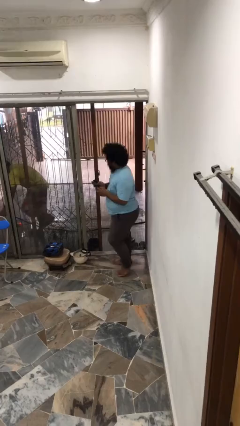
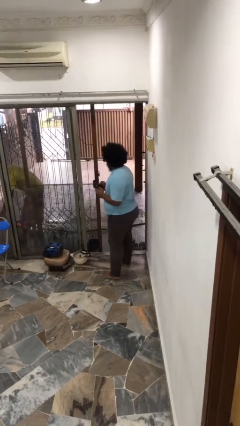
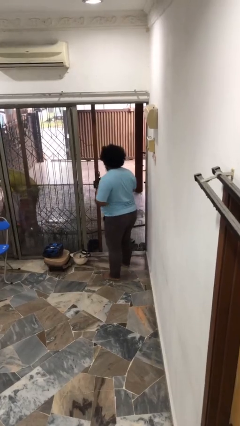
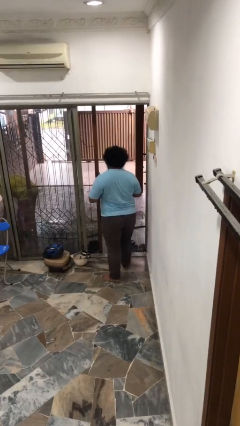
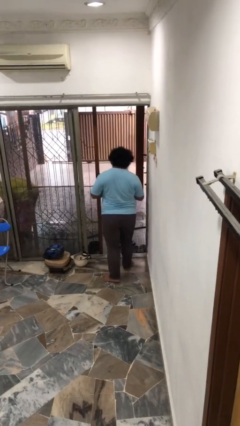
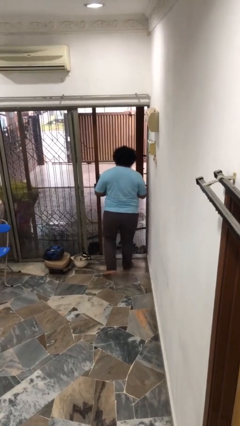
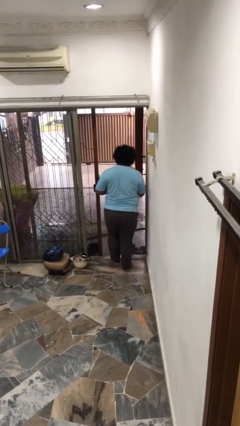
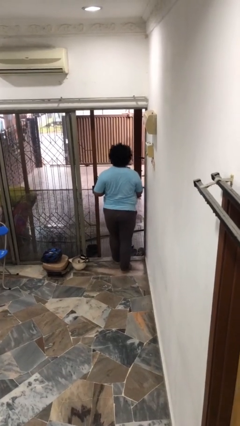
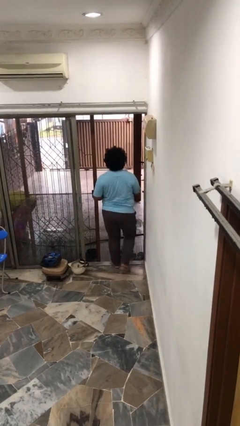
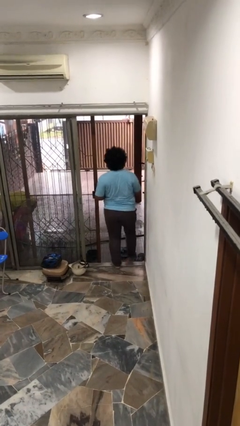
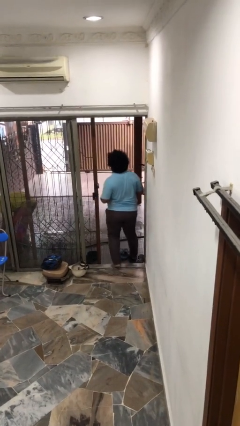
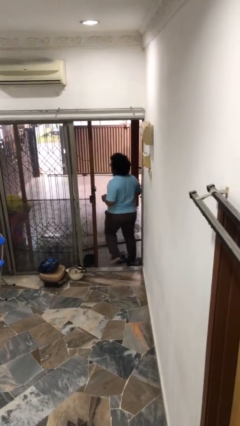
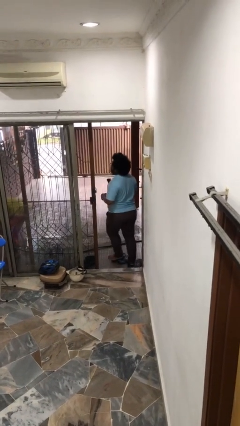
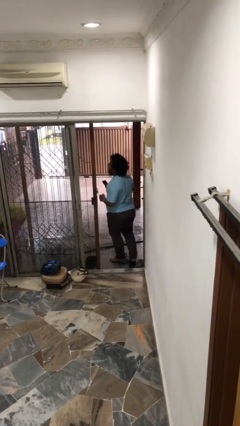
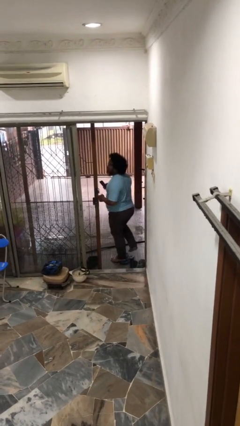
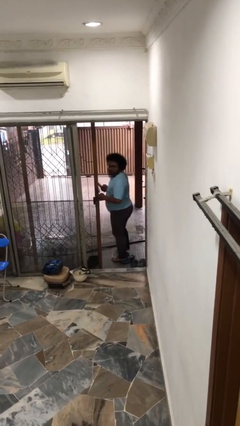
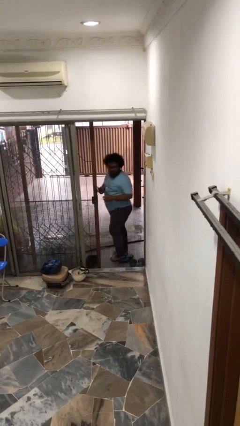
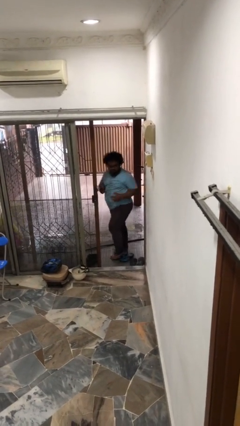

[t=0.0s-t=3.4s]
person exits scene through structure

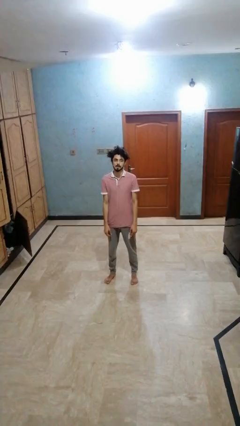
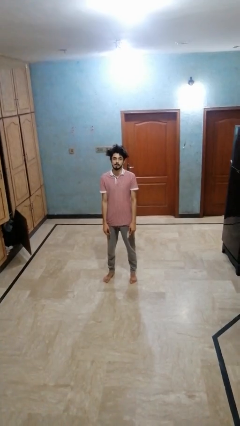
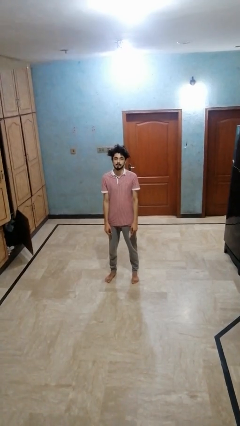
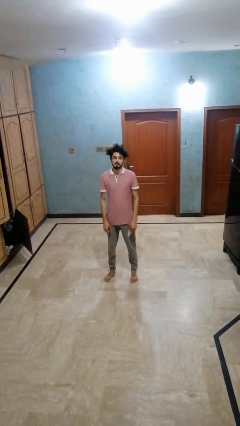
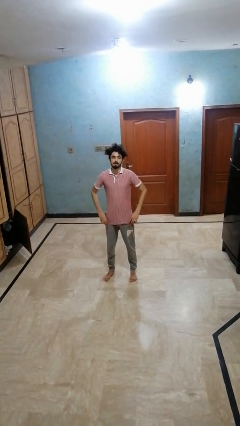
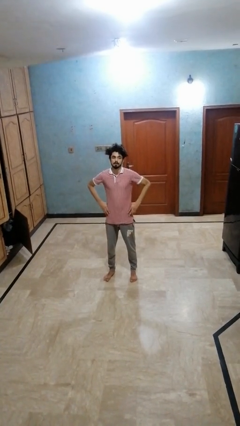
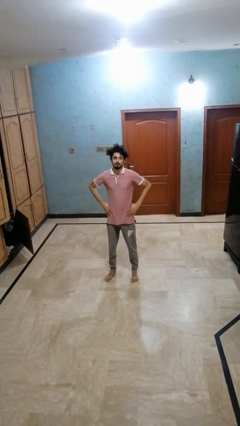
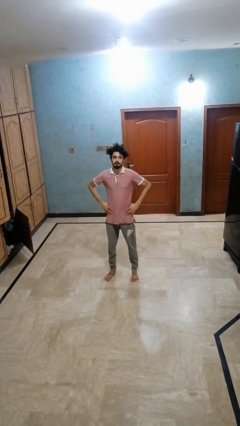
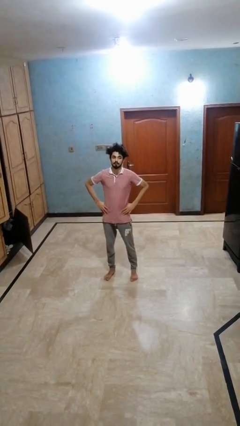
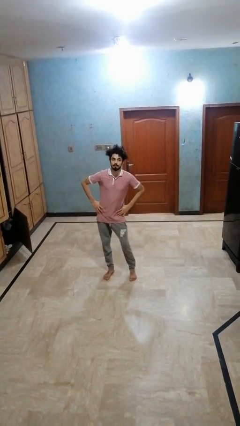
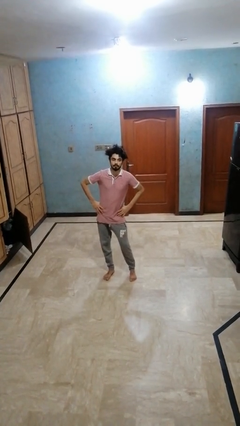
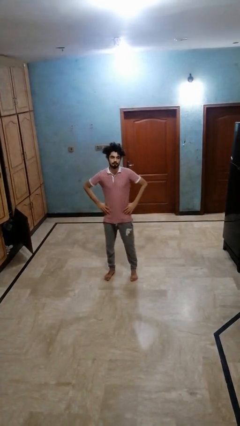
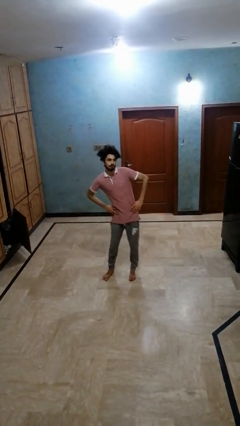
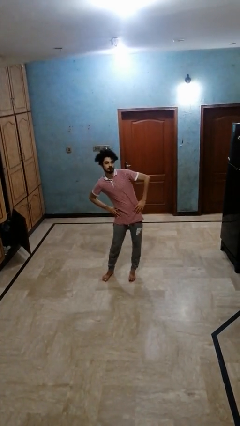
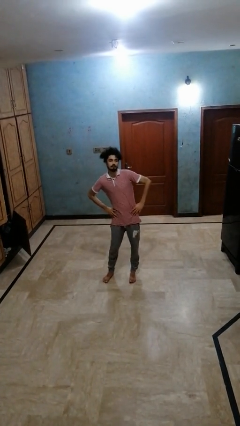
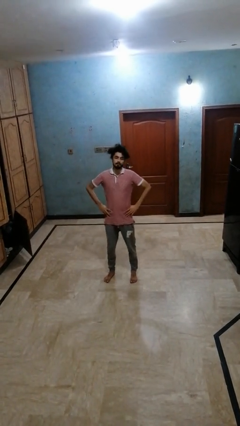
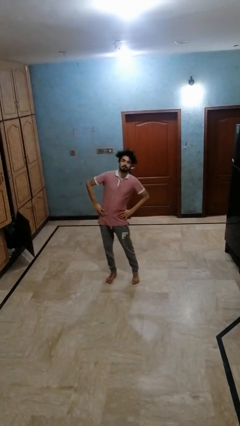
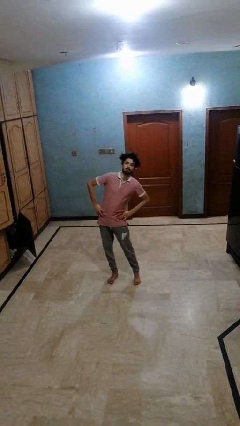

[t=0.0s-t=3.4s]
person wiggles hips

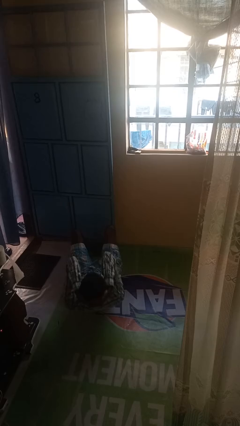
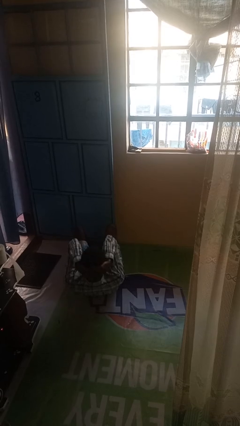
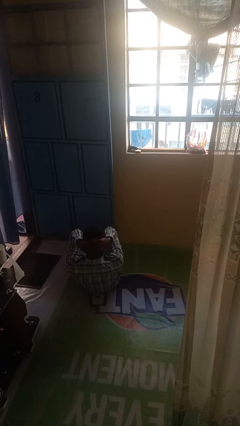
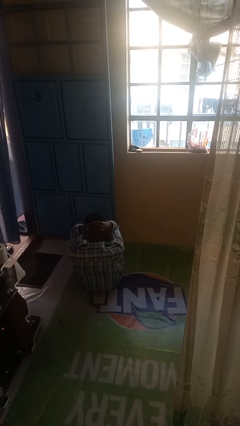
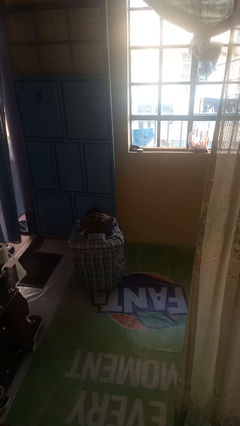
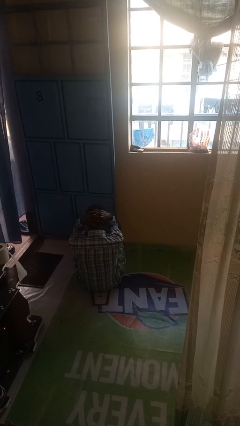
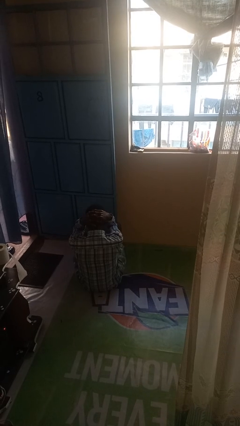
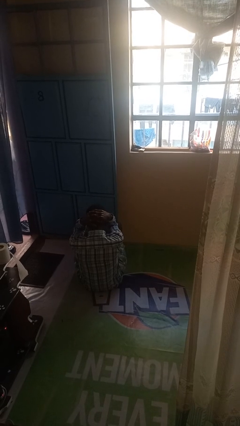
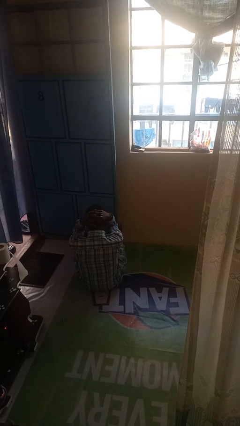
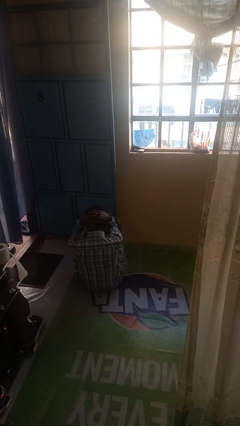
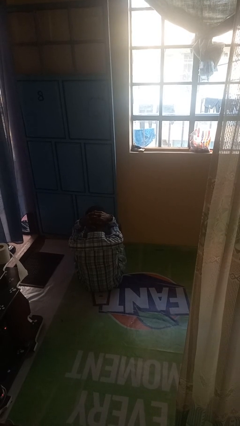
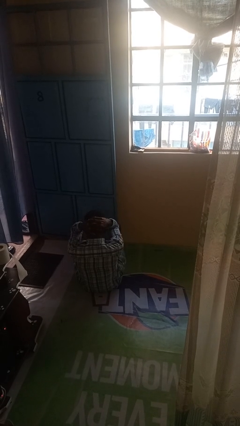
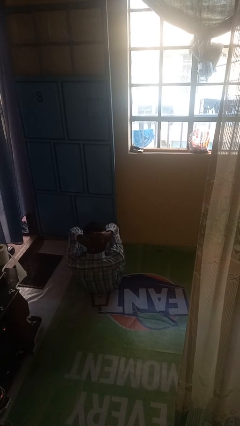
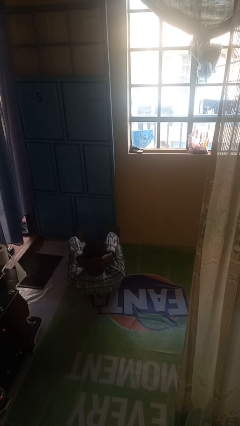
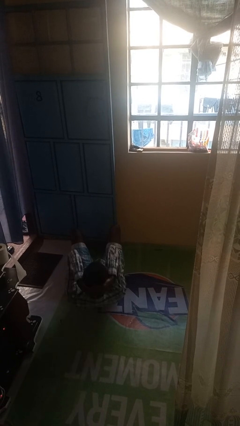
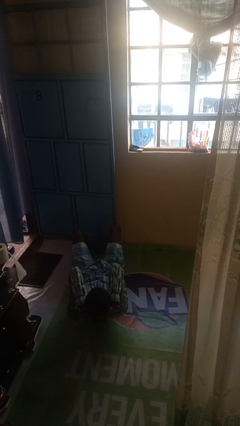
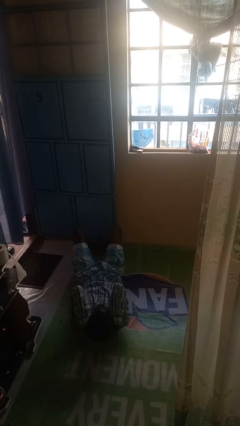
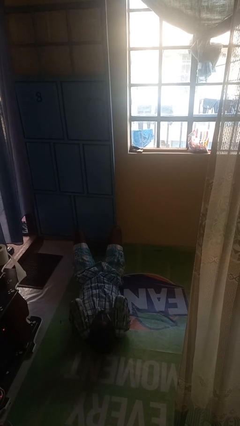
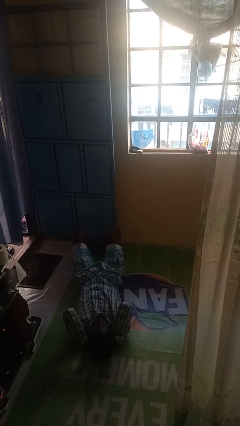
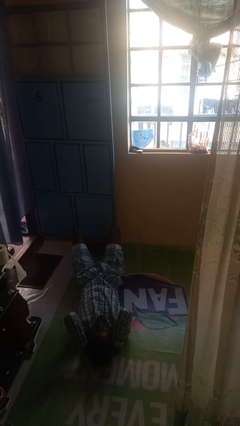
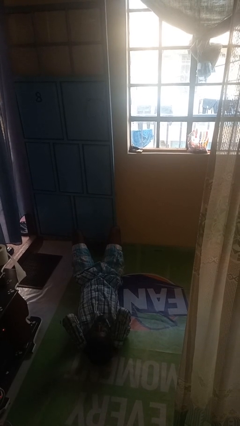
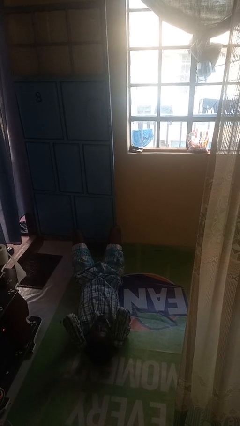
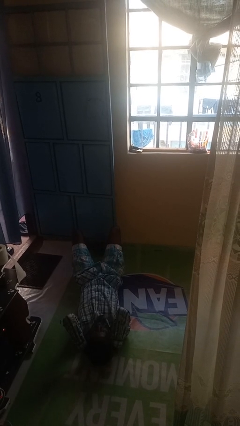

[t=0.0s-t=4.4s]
person exercises with situp

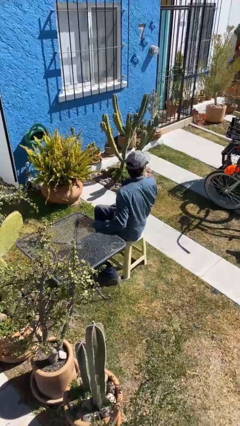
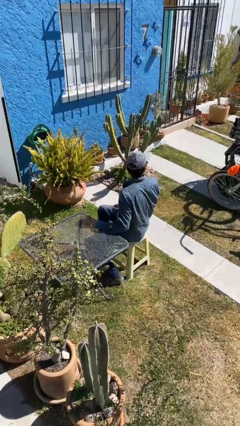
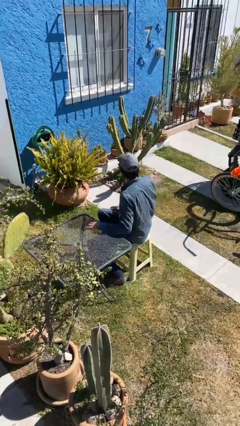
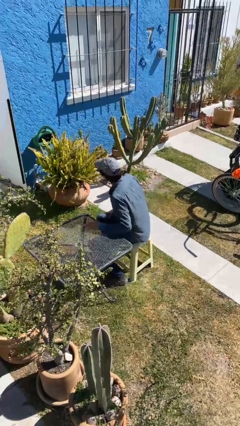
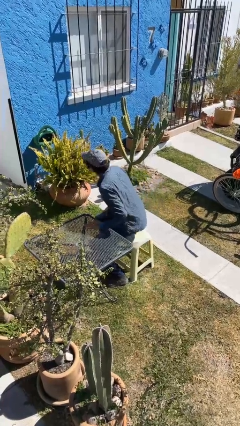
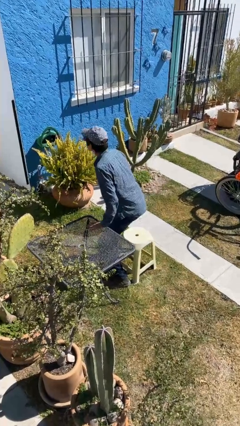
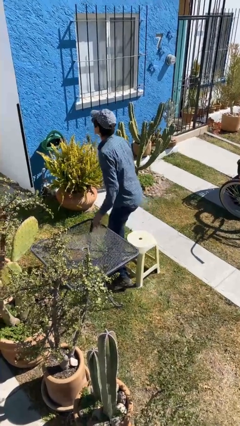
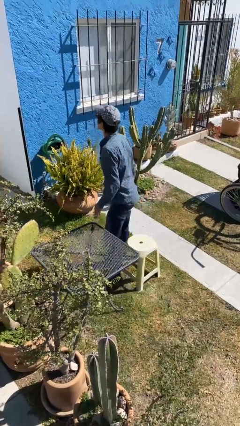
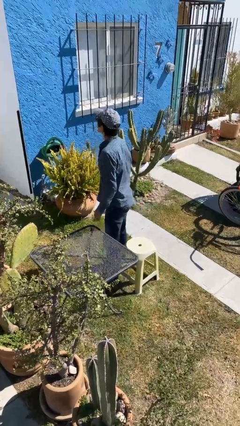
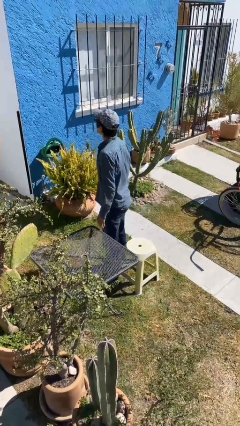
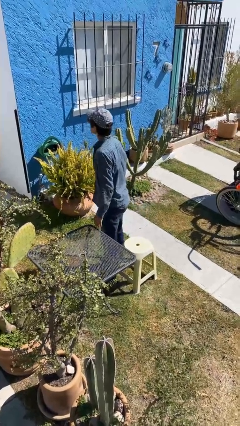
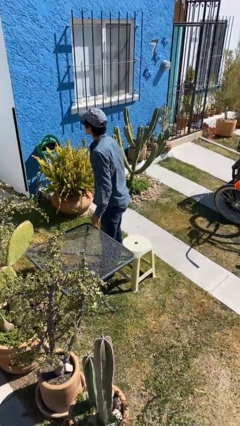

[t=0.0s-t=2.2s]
person stands up

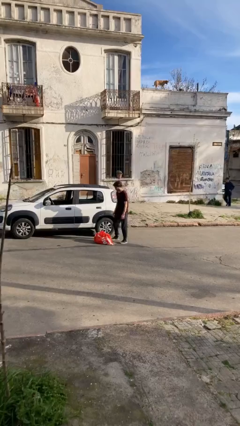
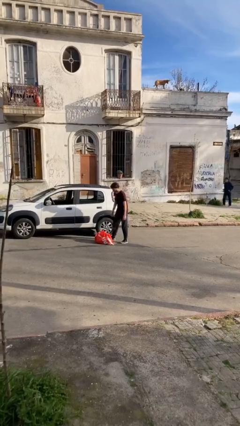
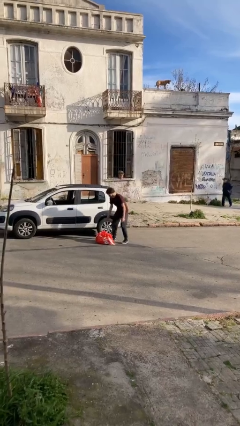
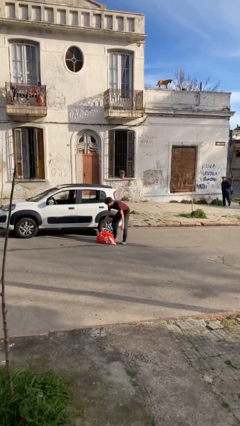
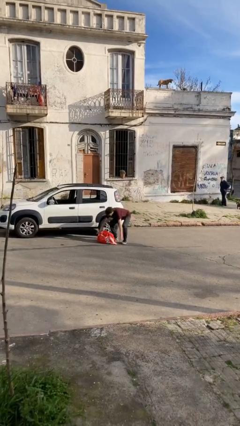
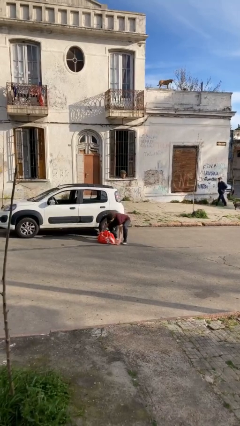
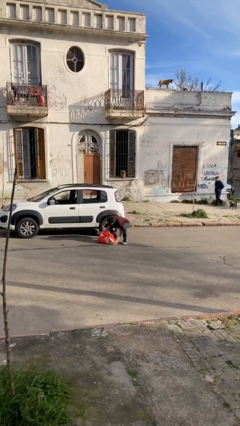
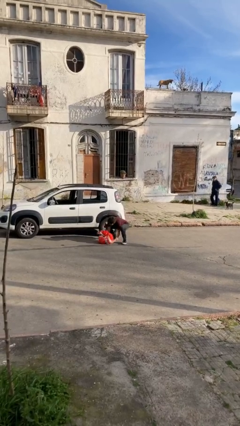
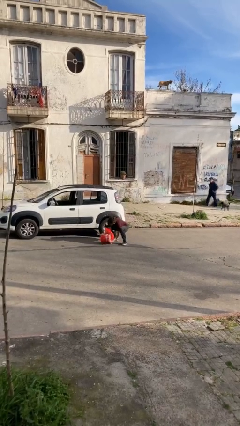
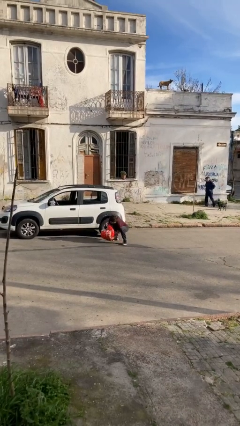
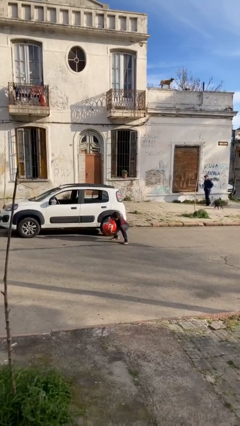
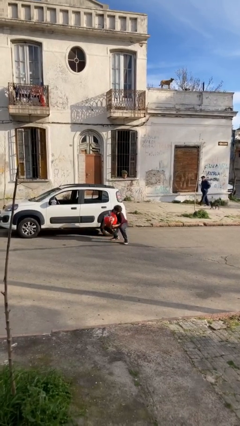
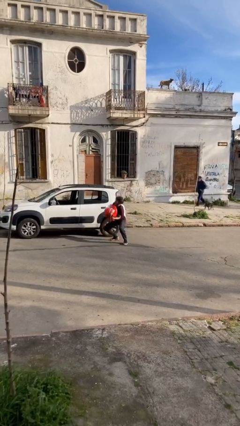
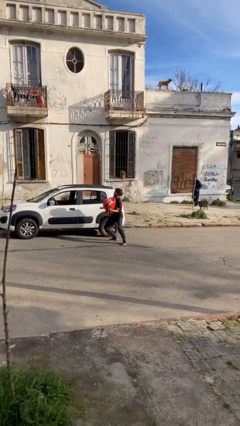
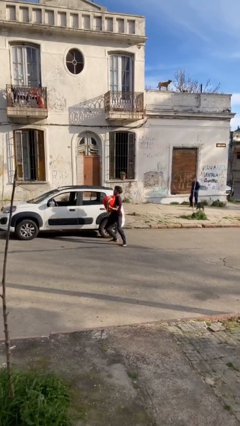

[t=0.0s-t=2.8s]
person picks up object from floor

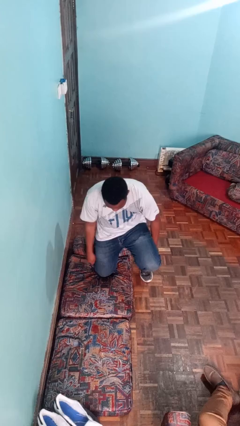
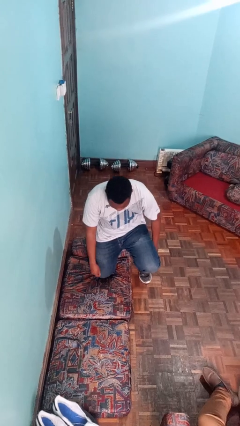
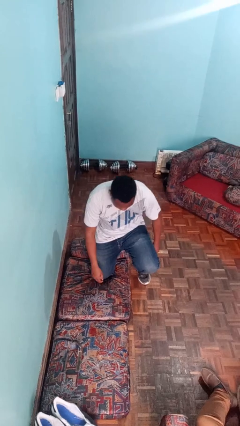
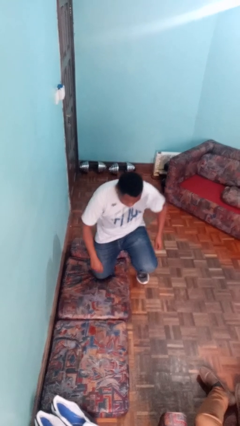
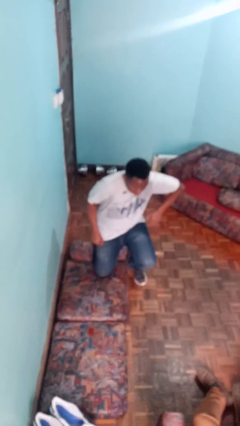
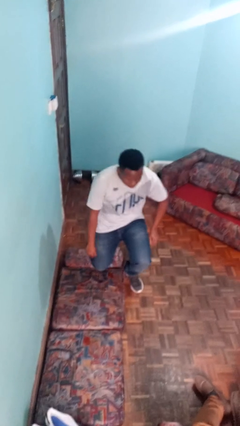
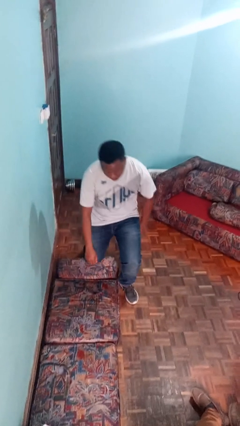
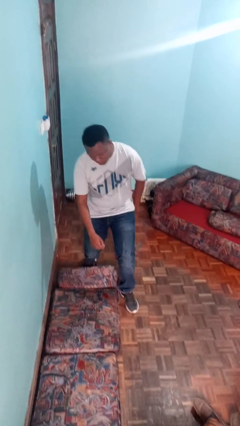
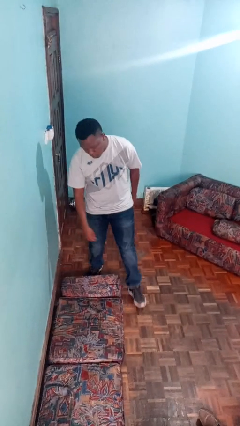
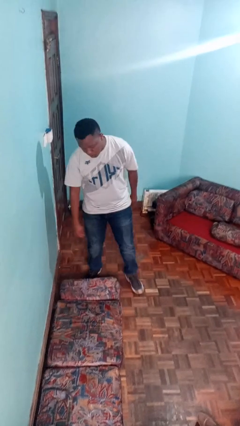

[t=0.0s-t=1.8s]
person stands up from floor
